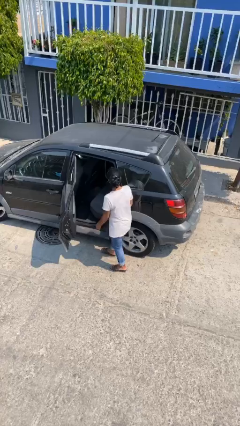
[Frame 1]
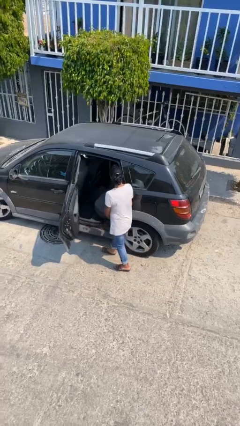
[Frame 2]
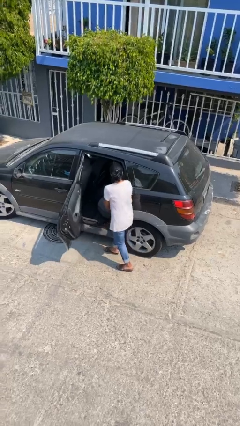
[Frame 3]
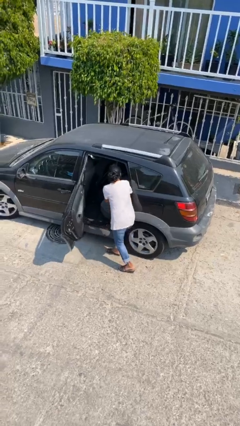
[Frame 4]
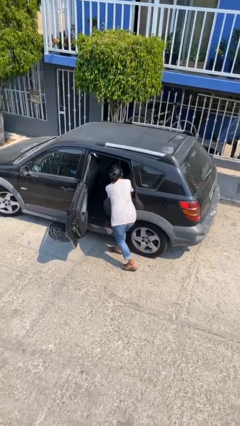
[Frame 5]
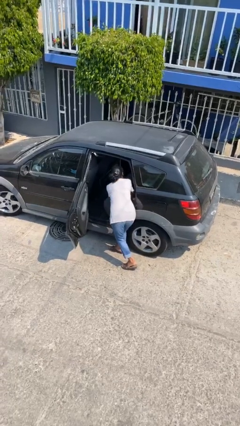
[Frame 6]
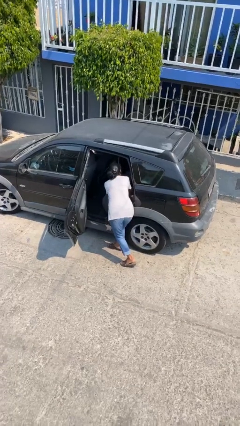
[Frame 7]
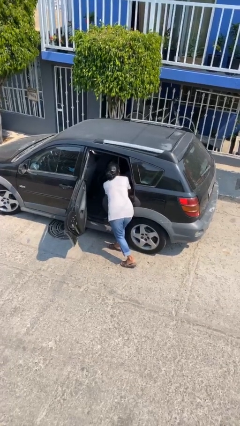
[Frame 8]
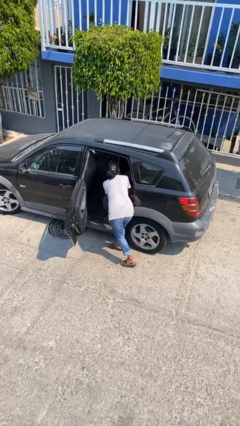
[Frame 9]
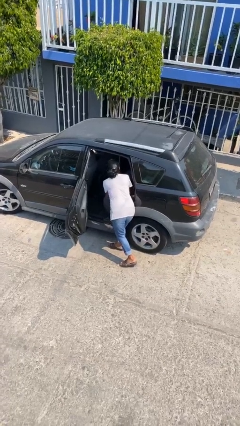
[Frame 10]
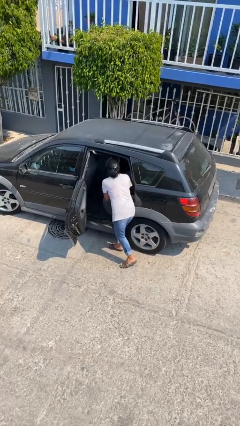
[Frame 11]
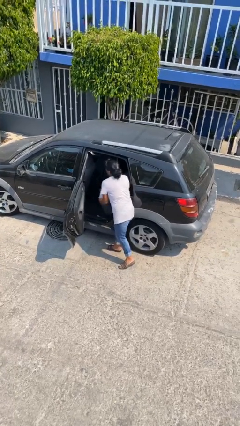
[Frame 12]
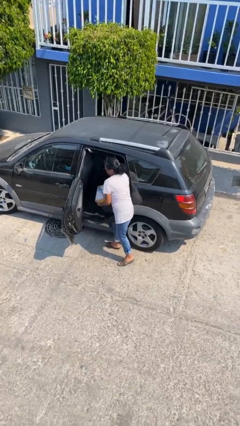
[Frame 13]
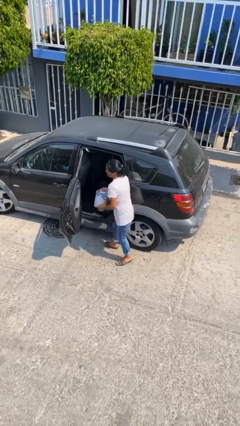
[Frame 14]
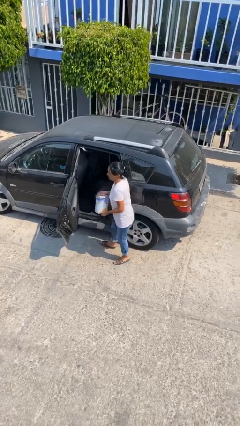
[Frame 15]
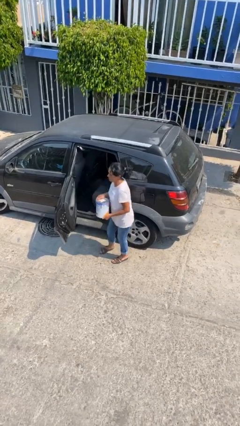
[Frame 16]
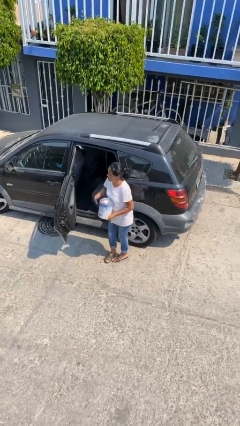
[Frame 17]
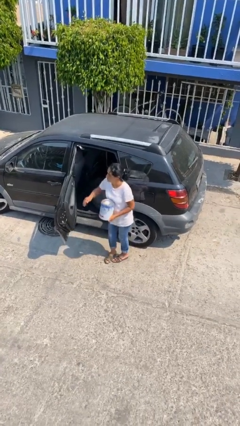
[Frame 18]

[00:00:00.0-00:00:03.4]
person unloads car

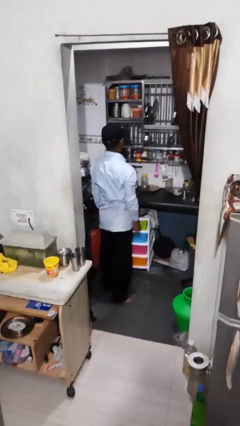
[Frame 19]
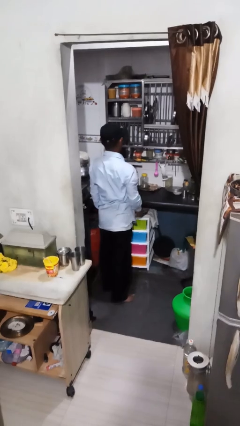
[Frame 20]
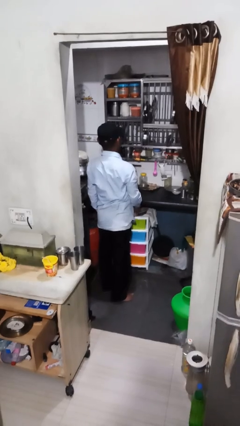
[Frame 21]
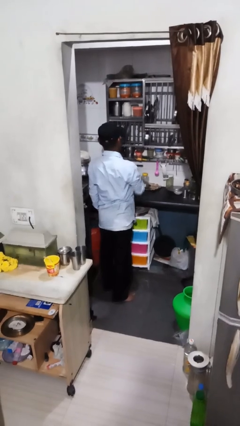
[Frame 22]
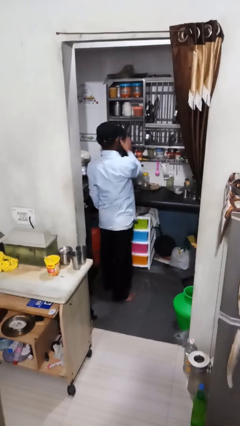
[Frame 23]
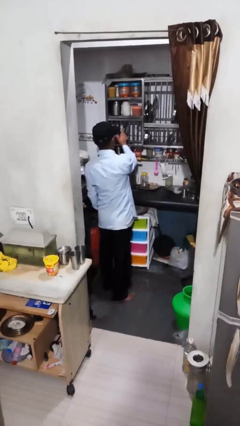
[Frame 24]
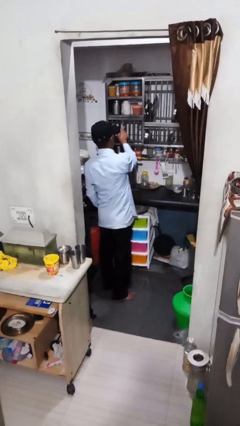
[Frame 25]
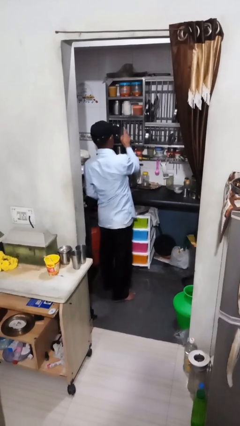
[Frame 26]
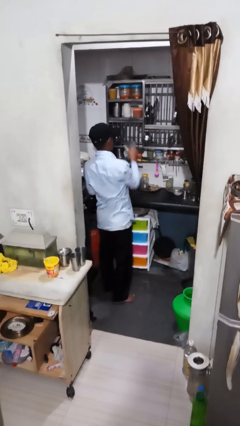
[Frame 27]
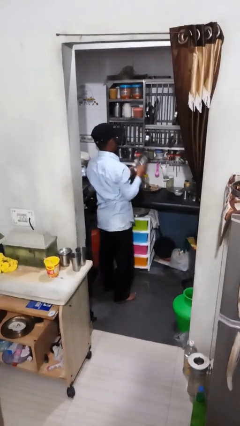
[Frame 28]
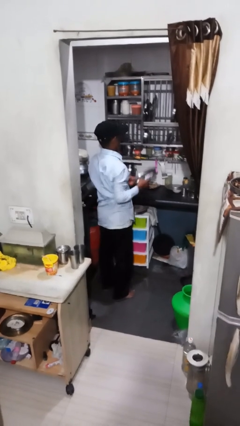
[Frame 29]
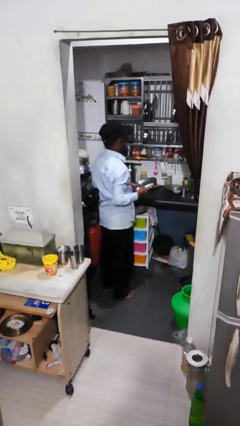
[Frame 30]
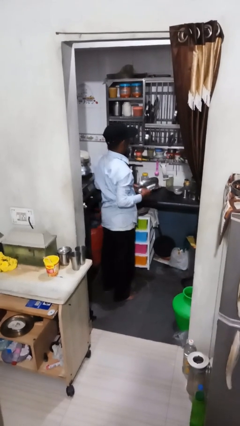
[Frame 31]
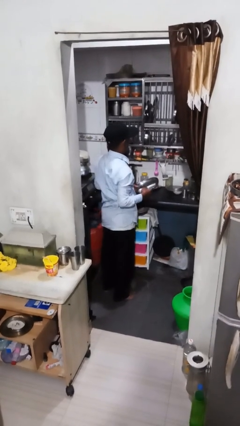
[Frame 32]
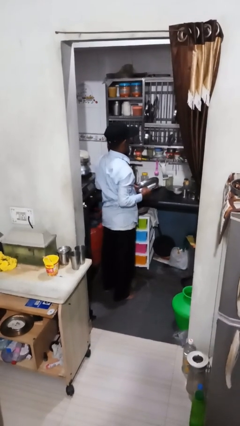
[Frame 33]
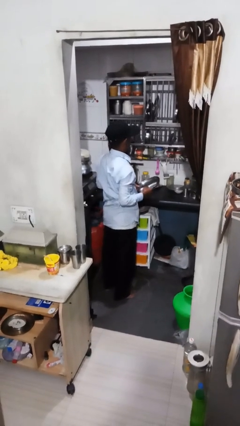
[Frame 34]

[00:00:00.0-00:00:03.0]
person takes object from cabinet

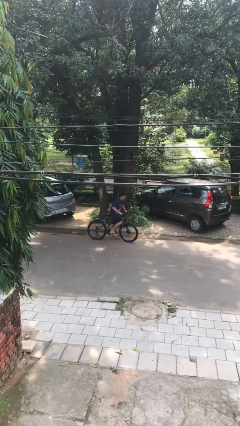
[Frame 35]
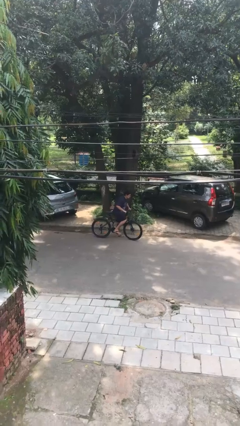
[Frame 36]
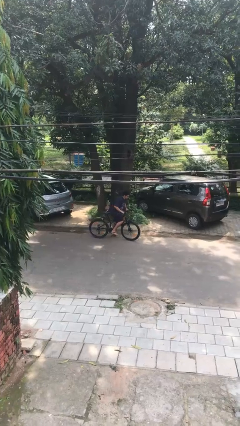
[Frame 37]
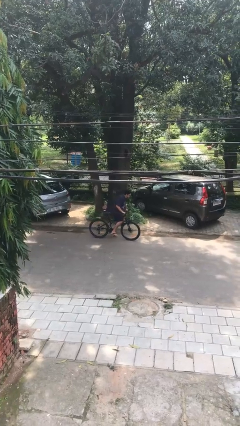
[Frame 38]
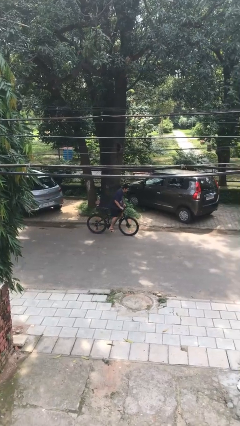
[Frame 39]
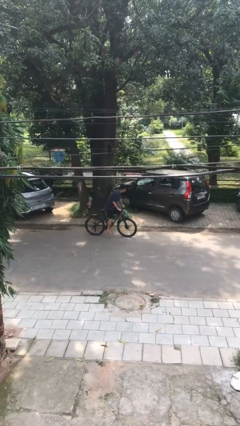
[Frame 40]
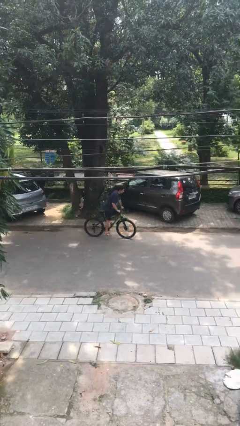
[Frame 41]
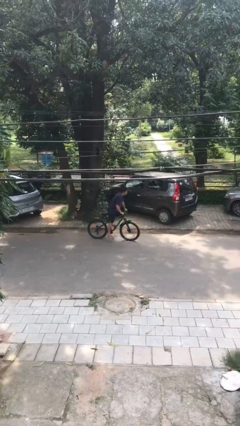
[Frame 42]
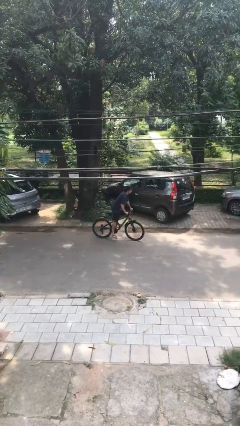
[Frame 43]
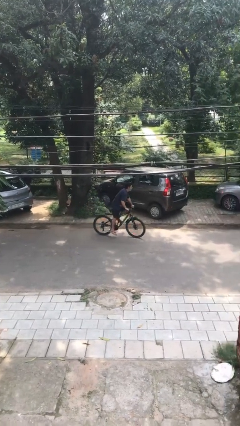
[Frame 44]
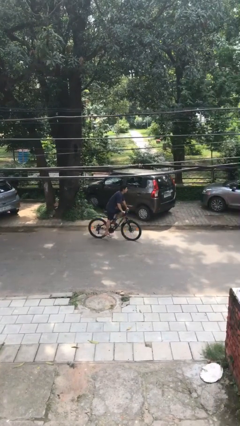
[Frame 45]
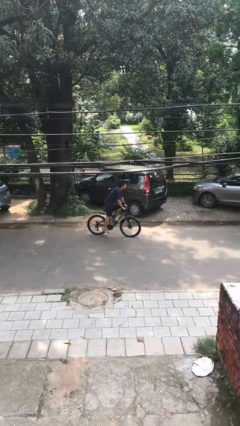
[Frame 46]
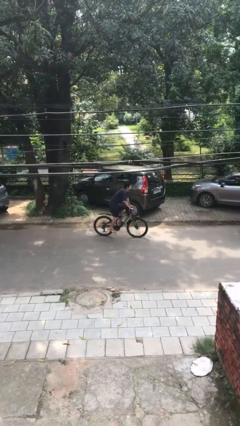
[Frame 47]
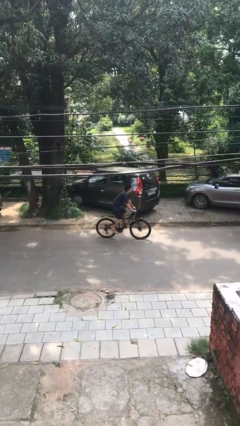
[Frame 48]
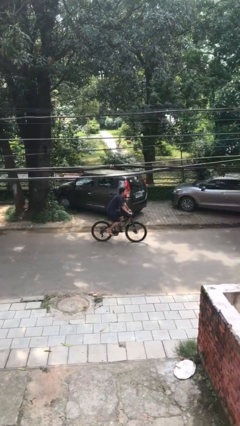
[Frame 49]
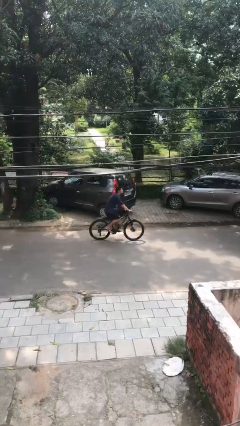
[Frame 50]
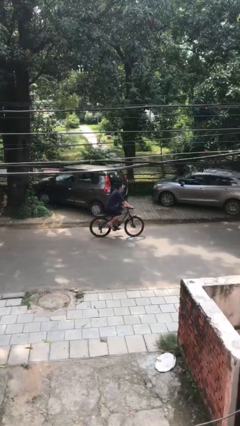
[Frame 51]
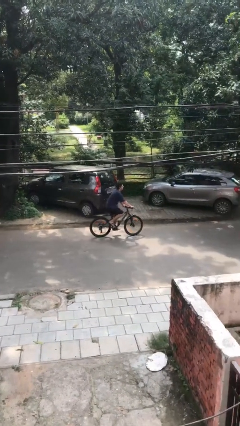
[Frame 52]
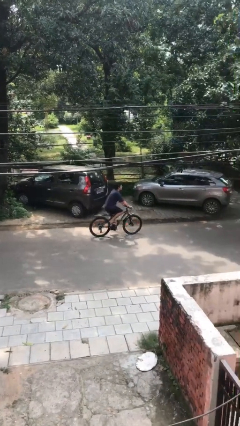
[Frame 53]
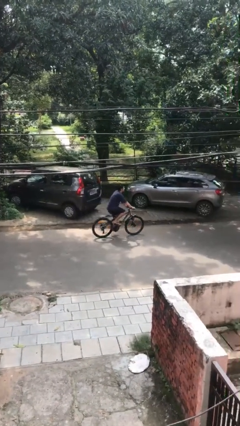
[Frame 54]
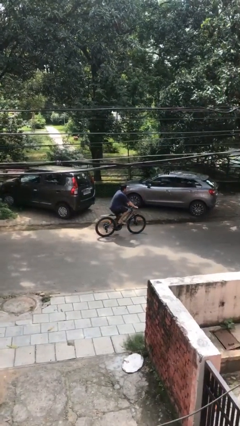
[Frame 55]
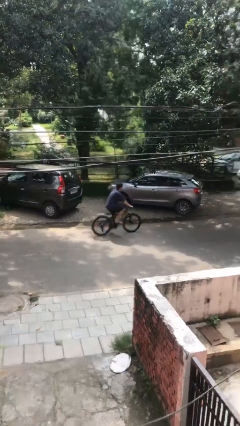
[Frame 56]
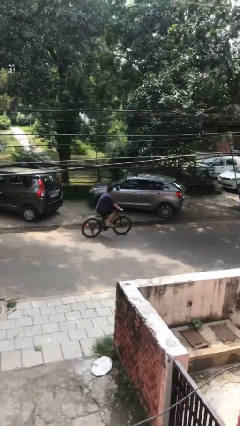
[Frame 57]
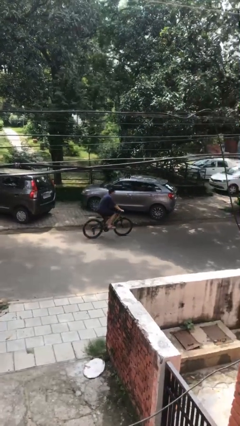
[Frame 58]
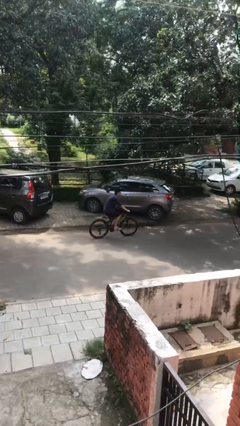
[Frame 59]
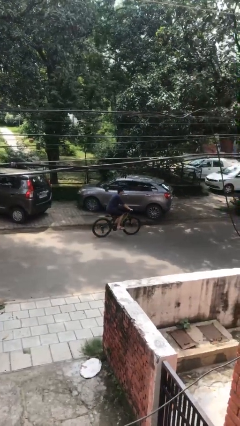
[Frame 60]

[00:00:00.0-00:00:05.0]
person rides bicycle

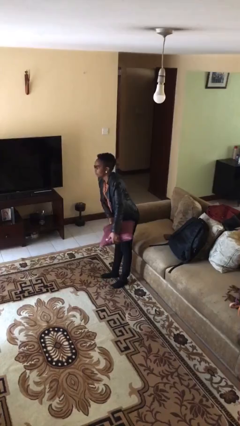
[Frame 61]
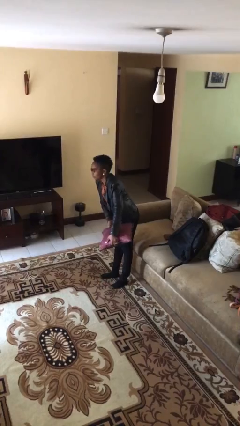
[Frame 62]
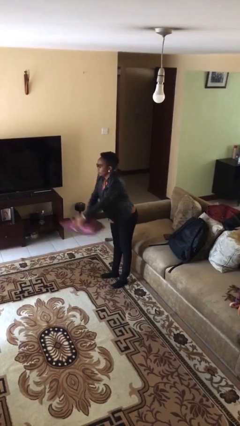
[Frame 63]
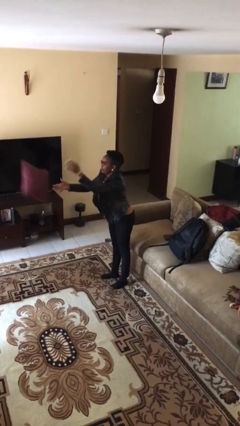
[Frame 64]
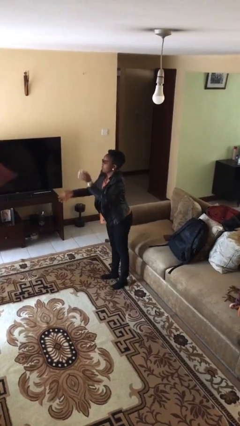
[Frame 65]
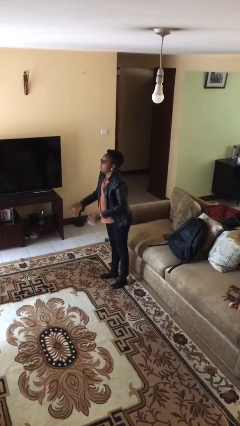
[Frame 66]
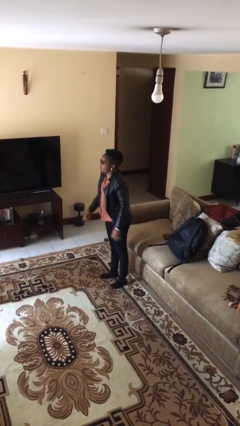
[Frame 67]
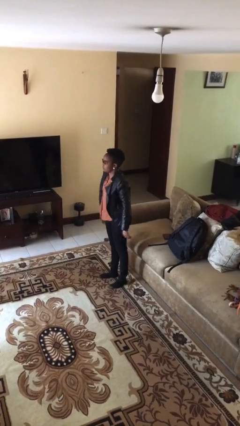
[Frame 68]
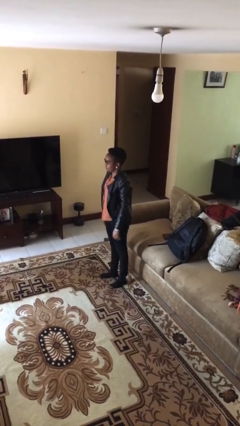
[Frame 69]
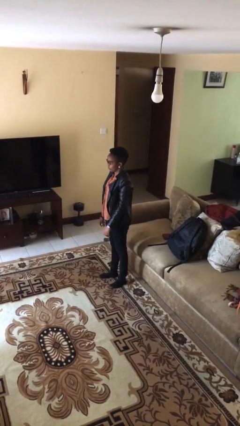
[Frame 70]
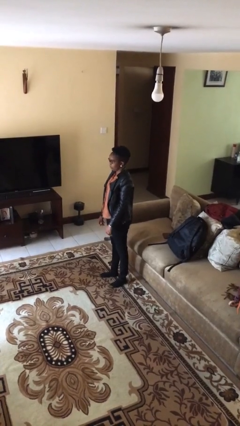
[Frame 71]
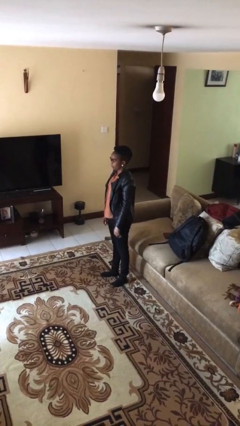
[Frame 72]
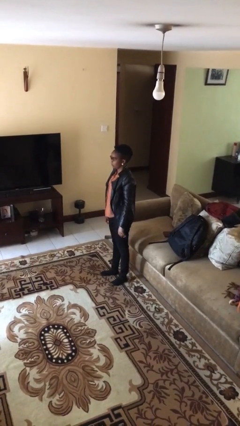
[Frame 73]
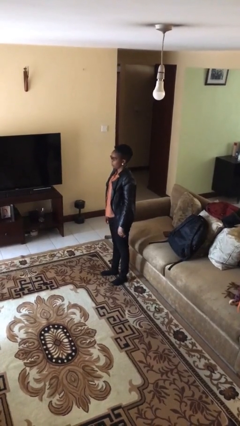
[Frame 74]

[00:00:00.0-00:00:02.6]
person throws object to person

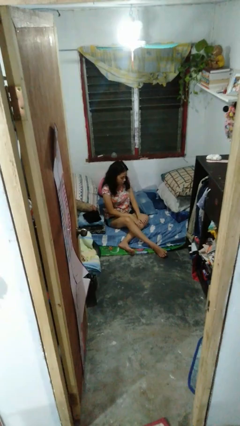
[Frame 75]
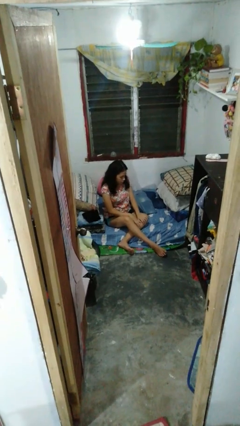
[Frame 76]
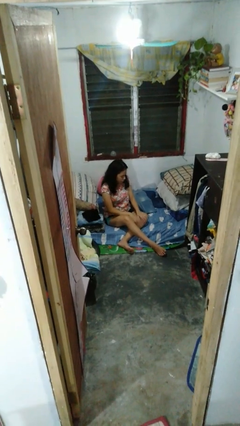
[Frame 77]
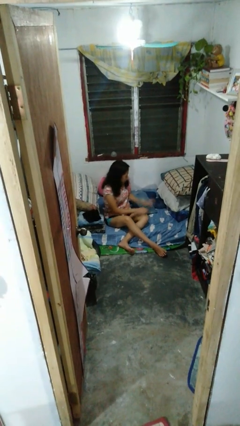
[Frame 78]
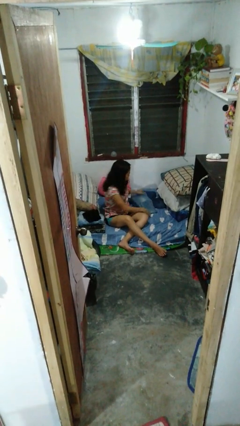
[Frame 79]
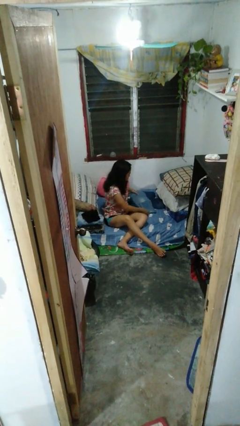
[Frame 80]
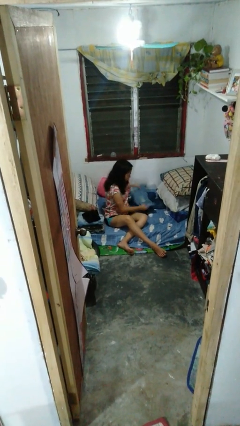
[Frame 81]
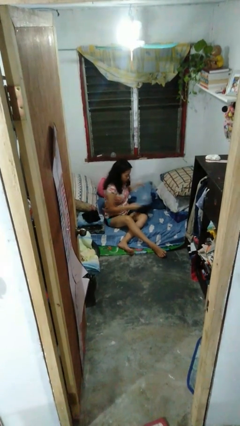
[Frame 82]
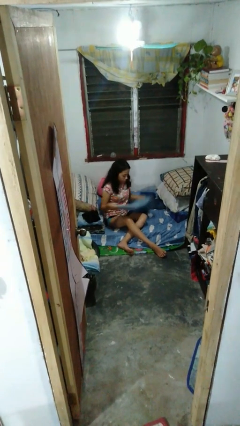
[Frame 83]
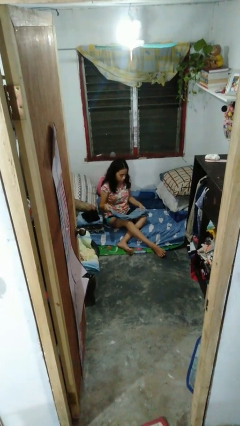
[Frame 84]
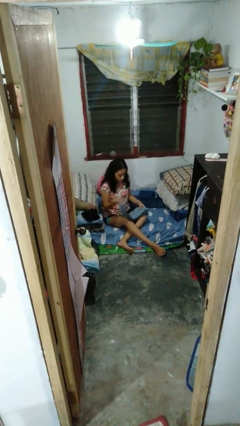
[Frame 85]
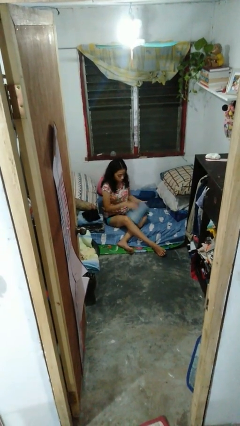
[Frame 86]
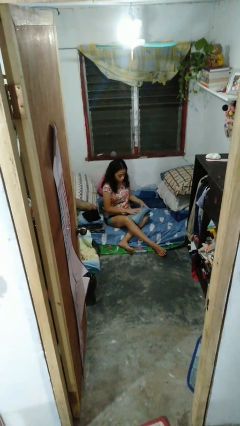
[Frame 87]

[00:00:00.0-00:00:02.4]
person folds pants

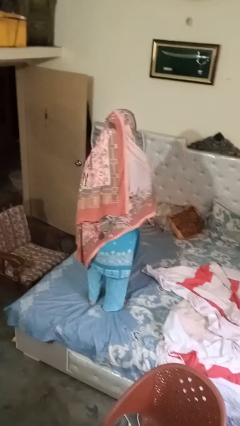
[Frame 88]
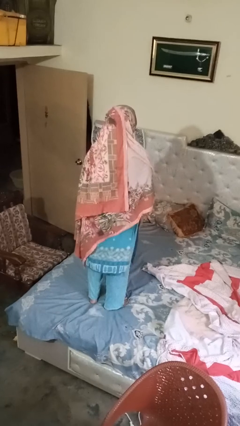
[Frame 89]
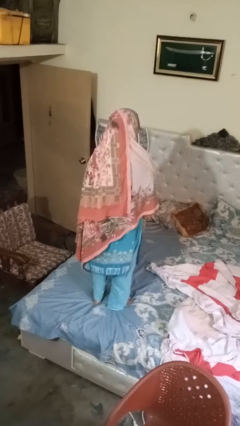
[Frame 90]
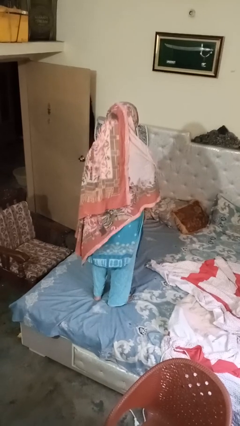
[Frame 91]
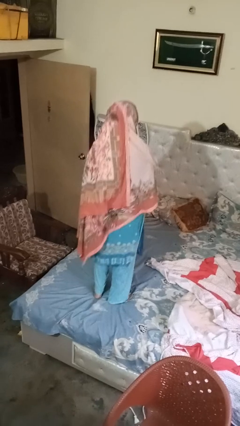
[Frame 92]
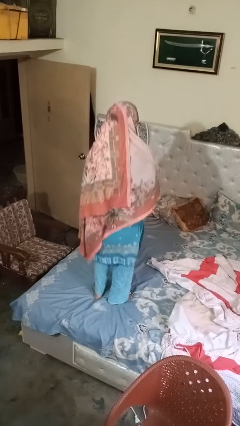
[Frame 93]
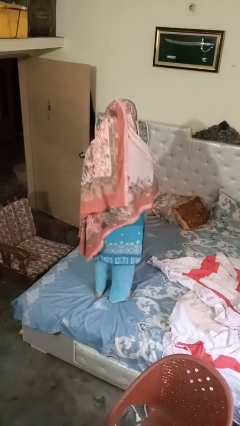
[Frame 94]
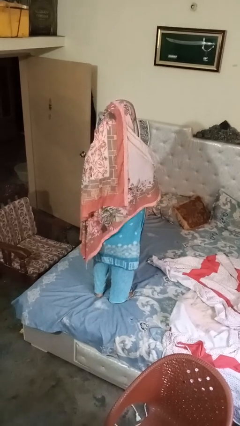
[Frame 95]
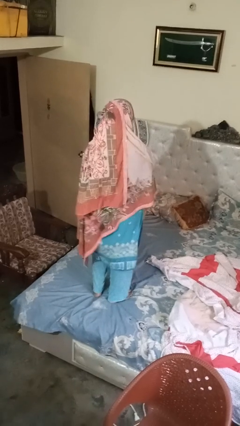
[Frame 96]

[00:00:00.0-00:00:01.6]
person jumps on bed
